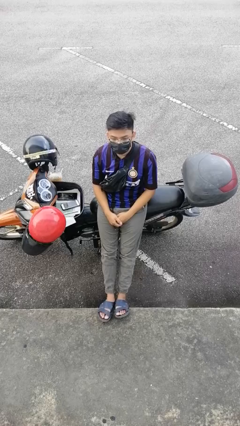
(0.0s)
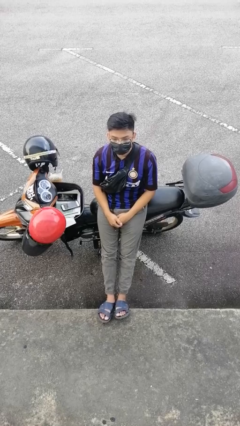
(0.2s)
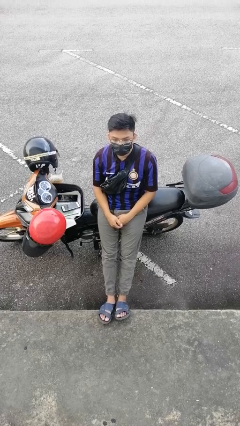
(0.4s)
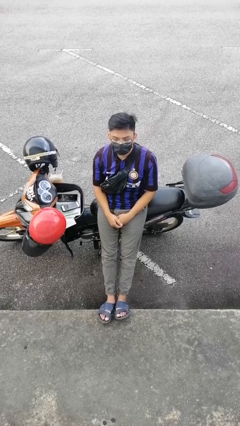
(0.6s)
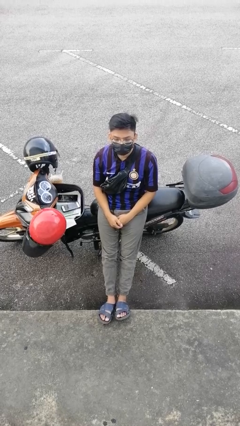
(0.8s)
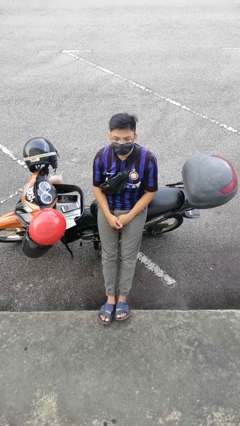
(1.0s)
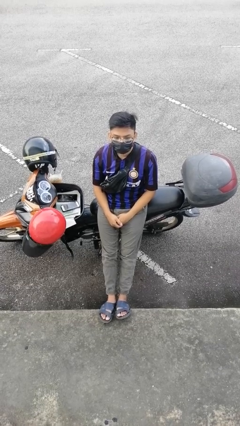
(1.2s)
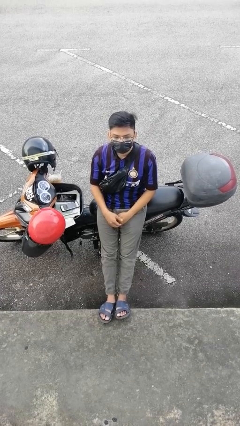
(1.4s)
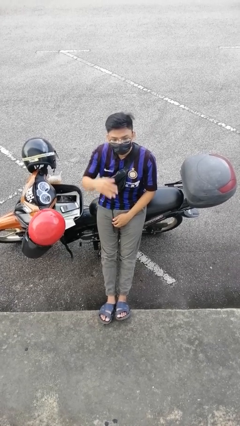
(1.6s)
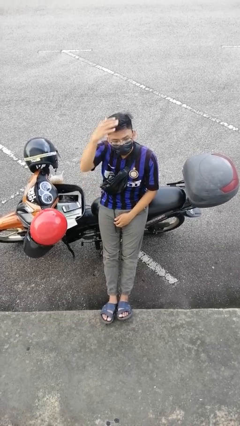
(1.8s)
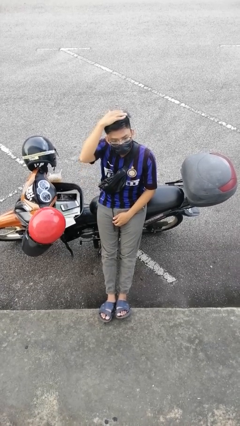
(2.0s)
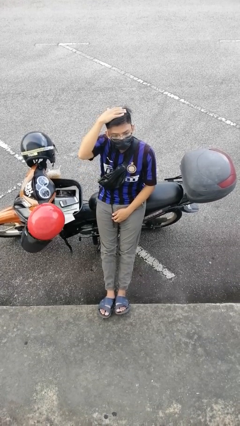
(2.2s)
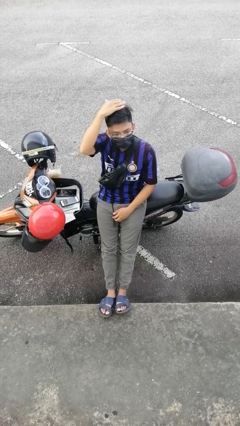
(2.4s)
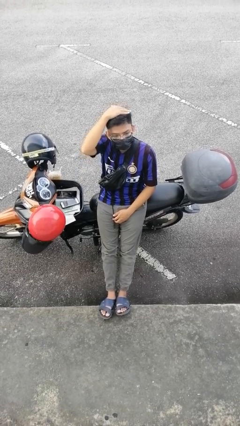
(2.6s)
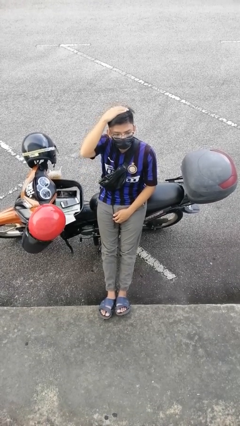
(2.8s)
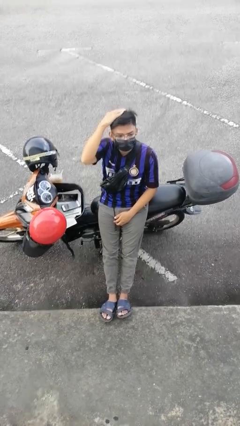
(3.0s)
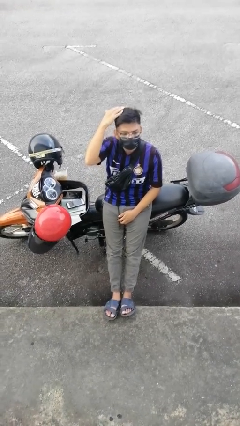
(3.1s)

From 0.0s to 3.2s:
person pats head

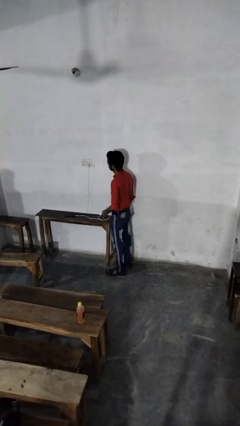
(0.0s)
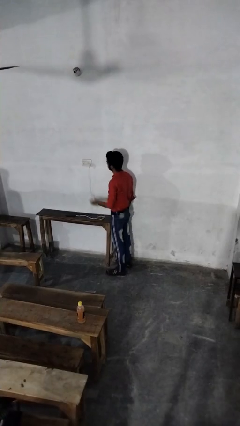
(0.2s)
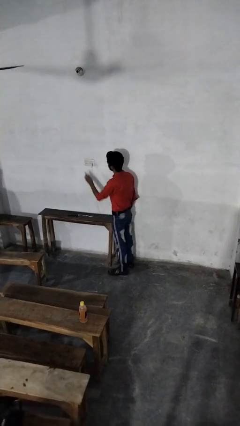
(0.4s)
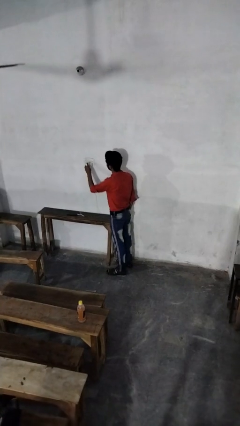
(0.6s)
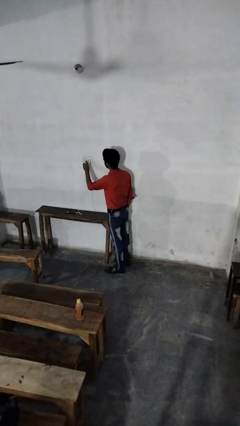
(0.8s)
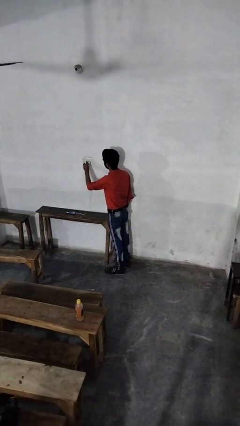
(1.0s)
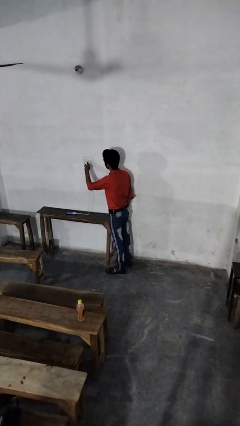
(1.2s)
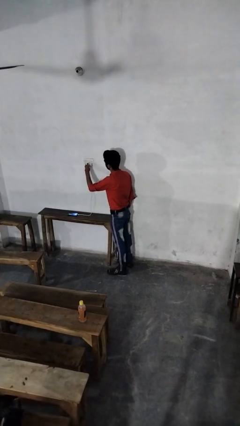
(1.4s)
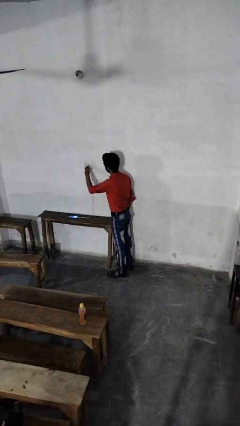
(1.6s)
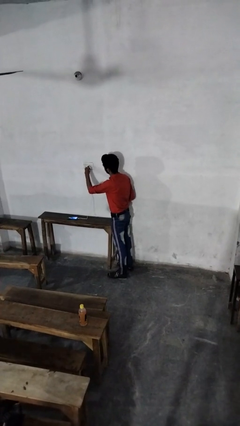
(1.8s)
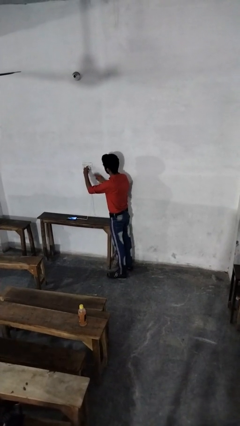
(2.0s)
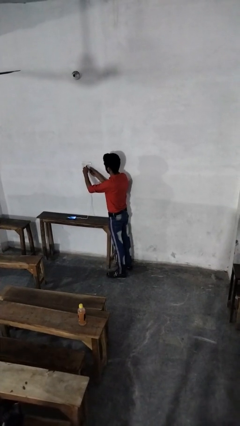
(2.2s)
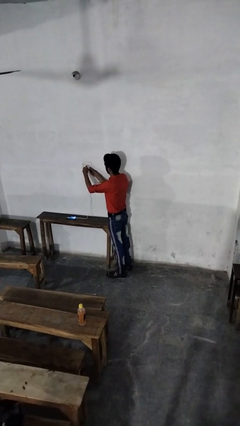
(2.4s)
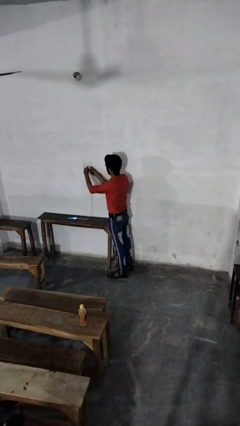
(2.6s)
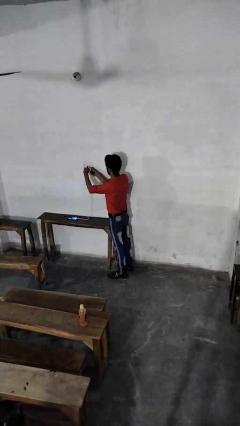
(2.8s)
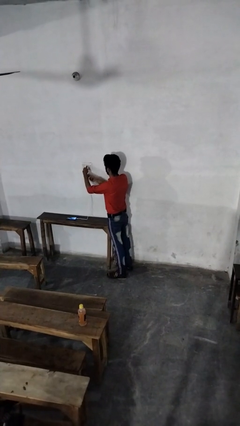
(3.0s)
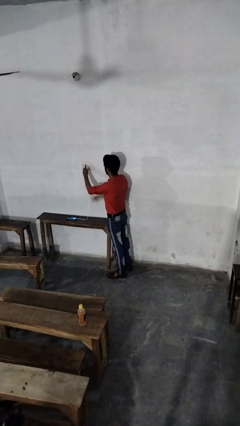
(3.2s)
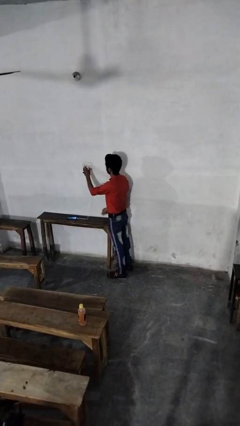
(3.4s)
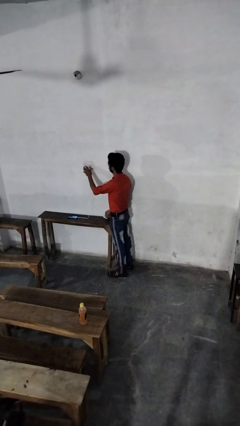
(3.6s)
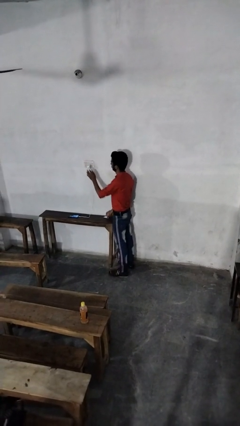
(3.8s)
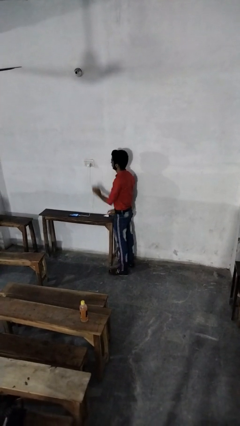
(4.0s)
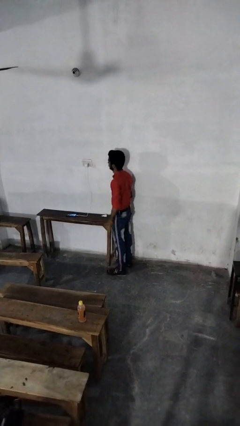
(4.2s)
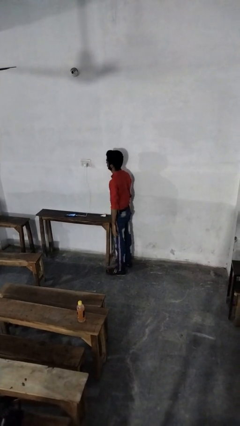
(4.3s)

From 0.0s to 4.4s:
person plugs into electrical socket

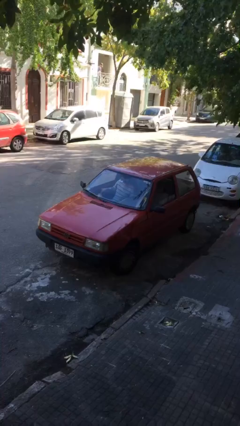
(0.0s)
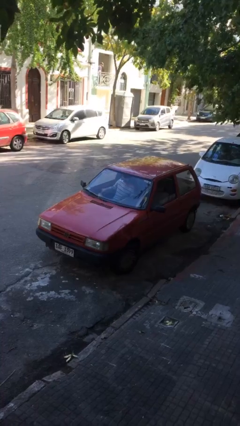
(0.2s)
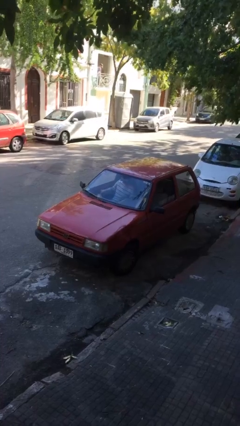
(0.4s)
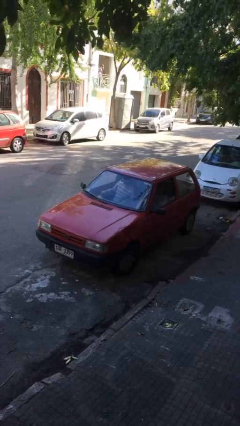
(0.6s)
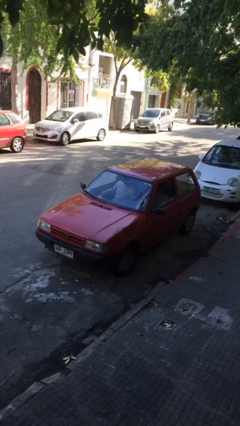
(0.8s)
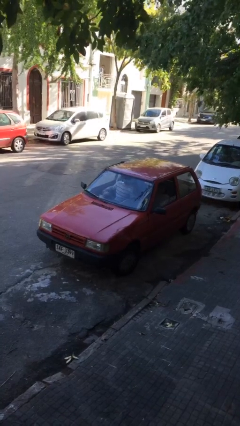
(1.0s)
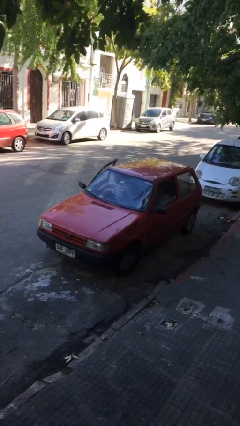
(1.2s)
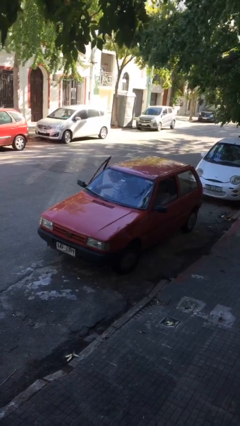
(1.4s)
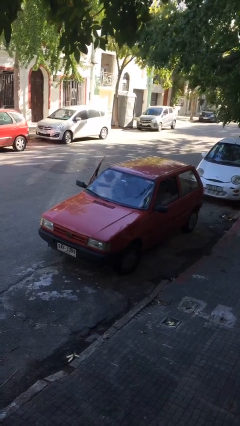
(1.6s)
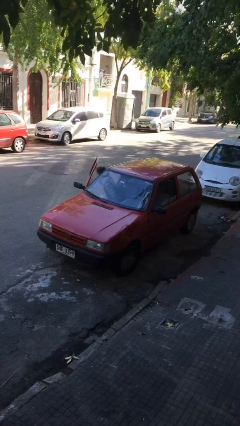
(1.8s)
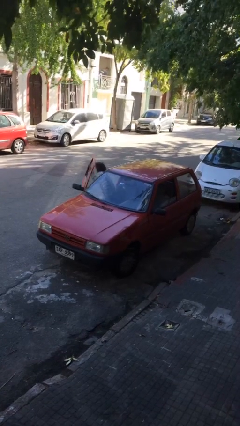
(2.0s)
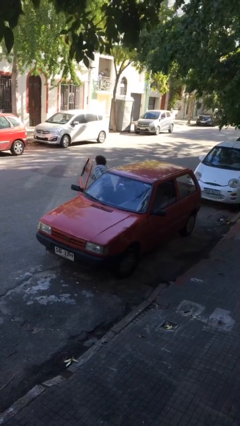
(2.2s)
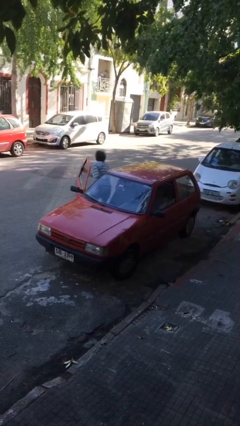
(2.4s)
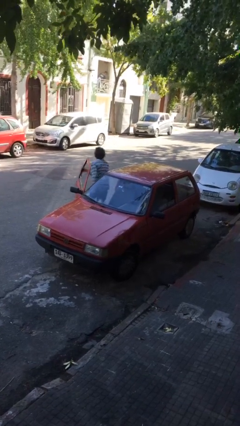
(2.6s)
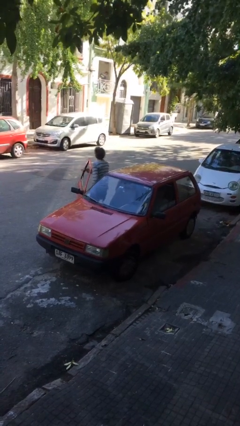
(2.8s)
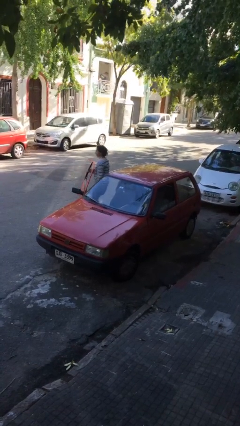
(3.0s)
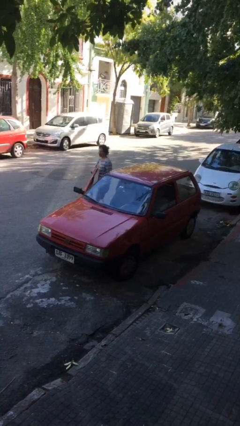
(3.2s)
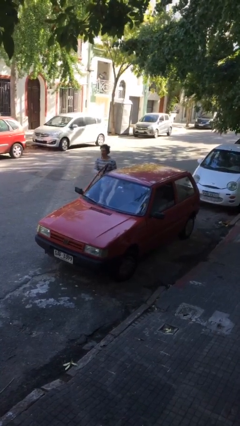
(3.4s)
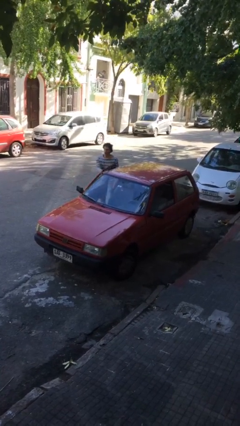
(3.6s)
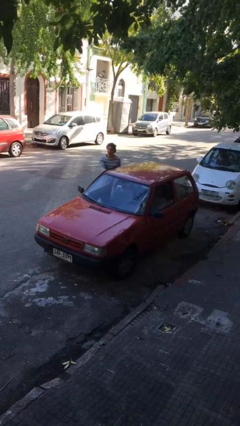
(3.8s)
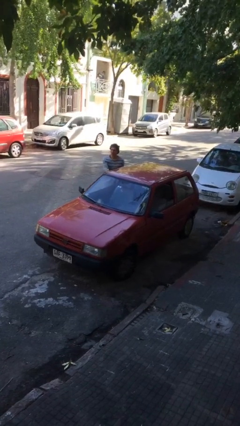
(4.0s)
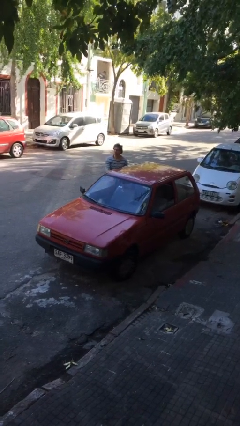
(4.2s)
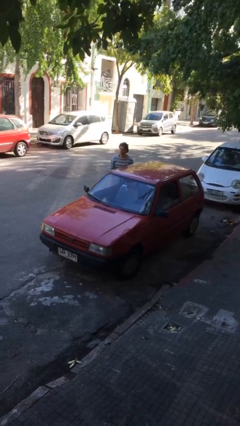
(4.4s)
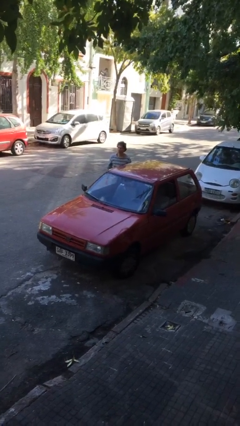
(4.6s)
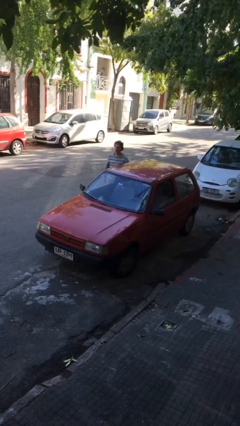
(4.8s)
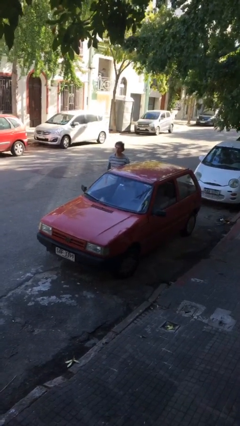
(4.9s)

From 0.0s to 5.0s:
car drops off person

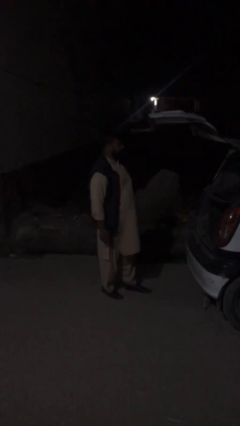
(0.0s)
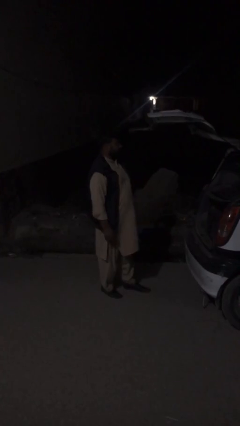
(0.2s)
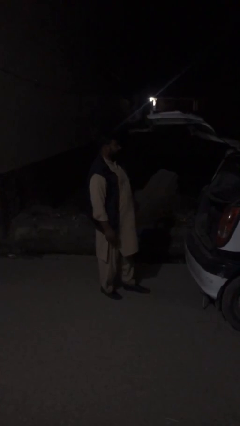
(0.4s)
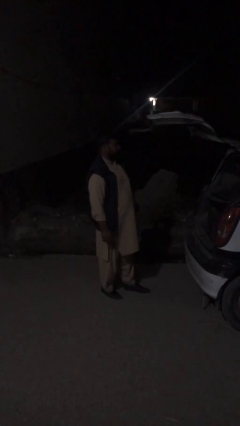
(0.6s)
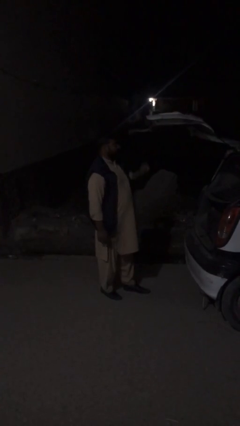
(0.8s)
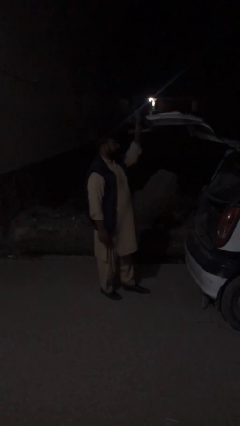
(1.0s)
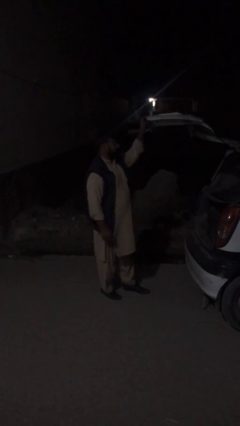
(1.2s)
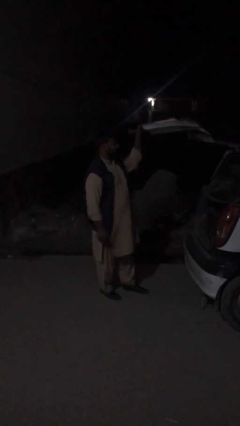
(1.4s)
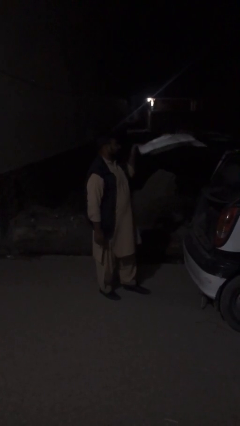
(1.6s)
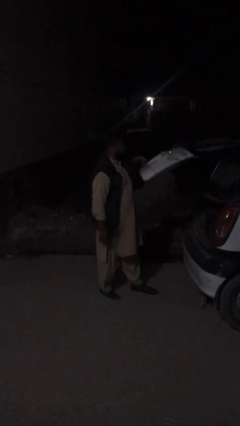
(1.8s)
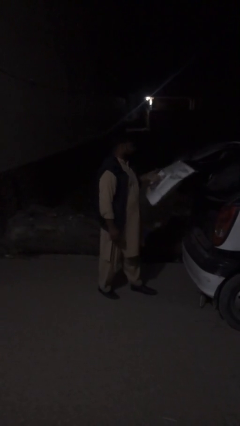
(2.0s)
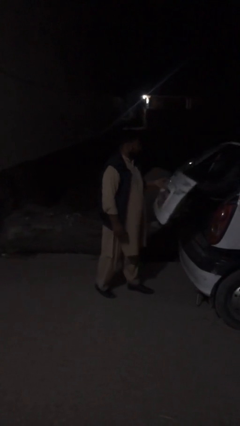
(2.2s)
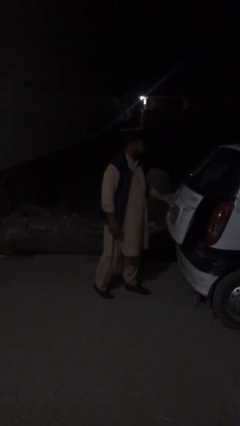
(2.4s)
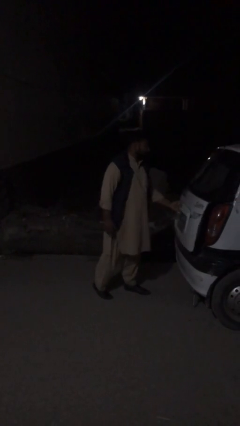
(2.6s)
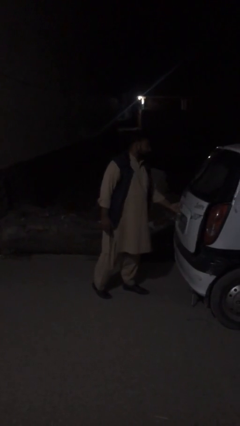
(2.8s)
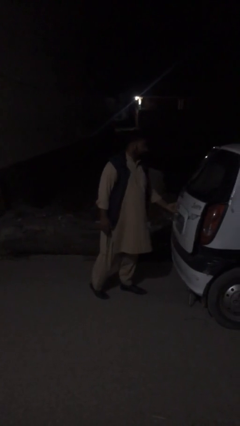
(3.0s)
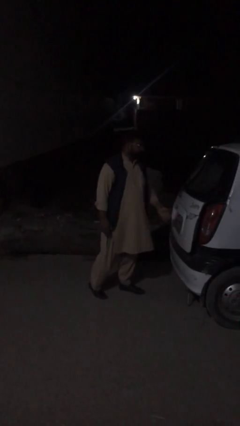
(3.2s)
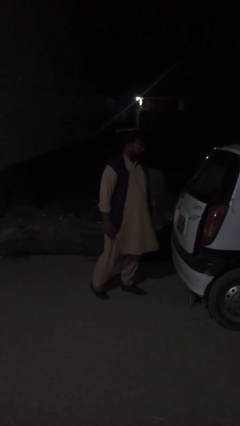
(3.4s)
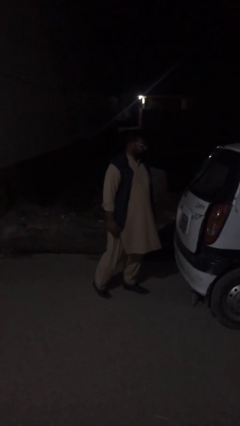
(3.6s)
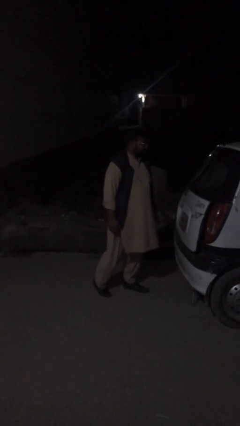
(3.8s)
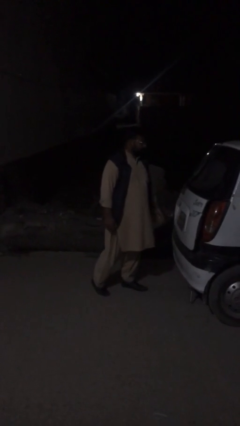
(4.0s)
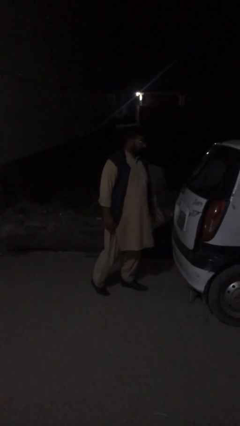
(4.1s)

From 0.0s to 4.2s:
person closes car trunk

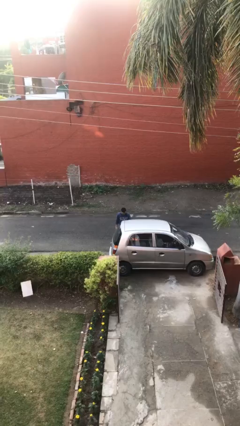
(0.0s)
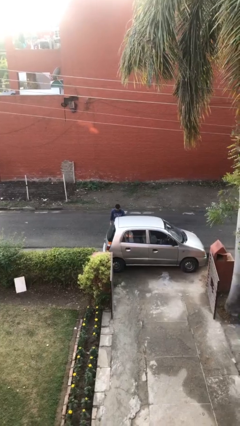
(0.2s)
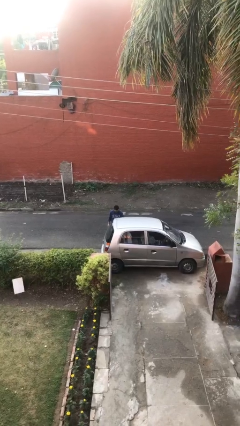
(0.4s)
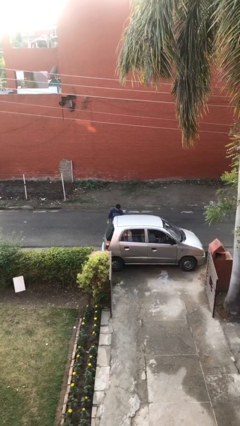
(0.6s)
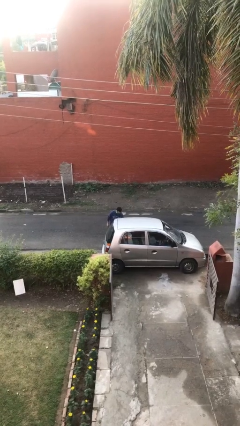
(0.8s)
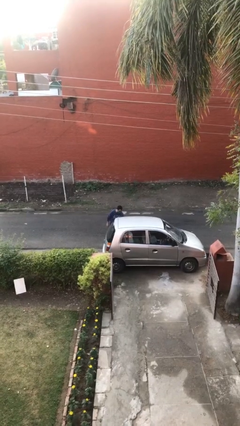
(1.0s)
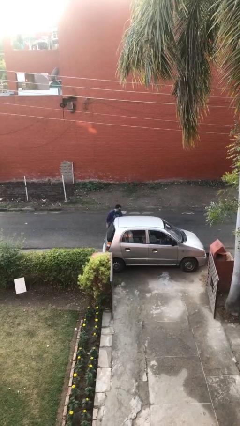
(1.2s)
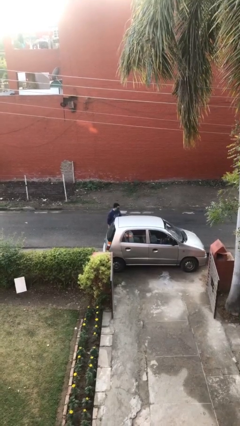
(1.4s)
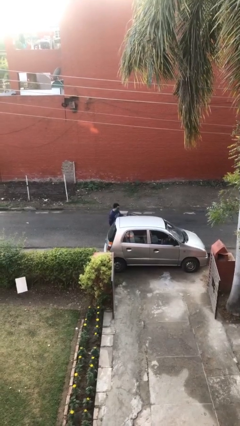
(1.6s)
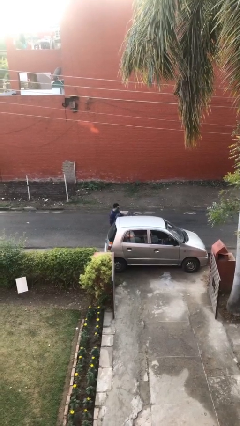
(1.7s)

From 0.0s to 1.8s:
person opens car door
